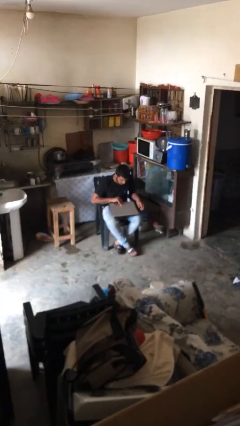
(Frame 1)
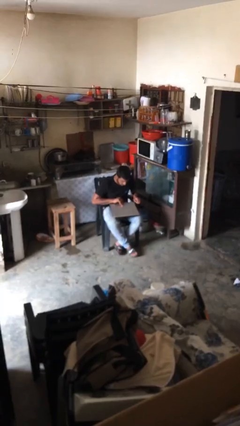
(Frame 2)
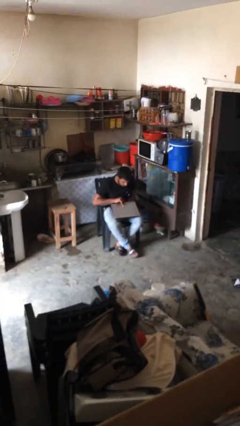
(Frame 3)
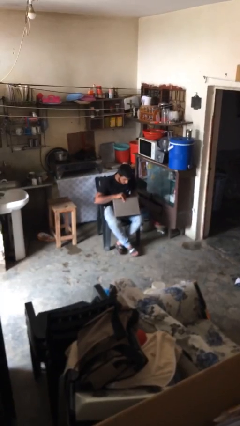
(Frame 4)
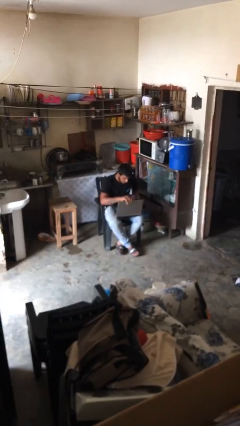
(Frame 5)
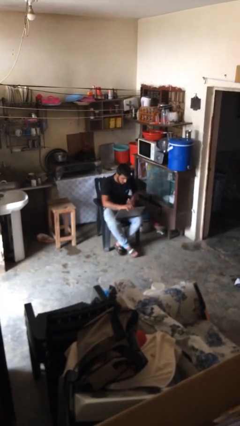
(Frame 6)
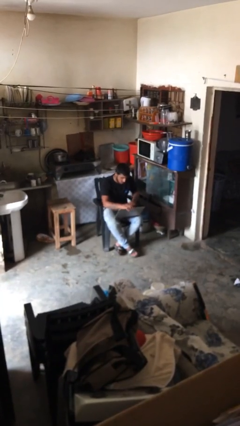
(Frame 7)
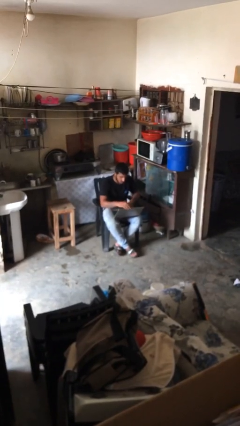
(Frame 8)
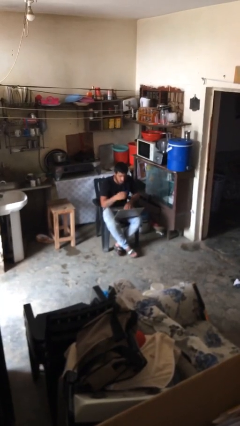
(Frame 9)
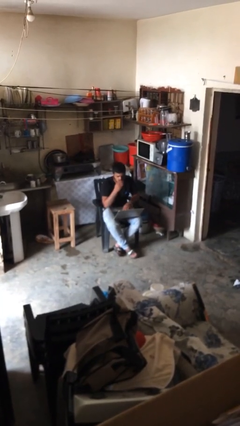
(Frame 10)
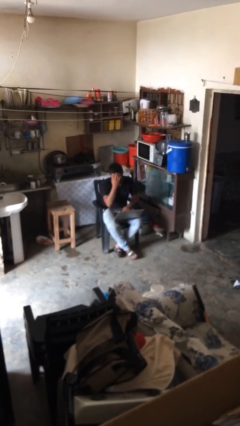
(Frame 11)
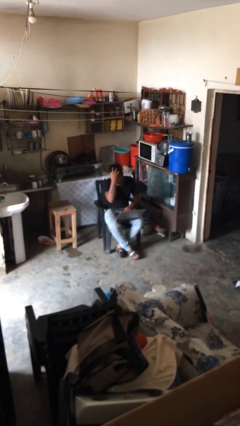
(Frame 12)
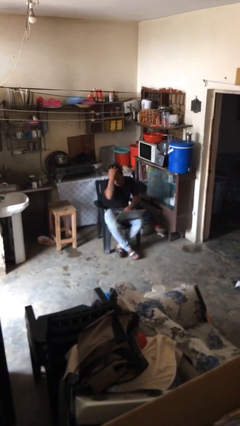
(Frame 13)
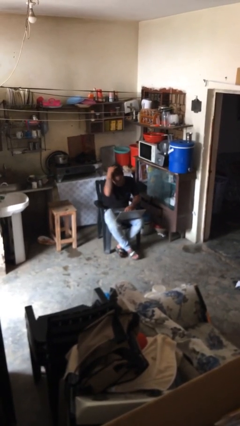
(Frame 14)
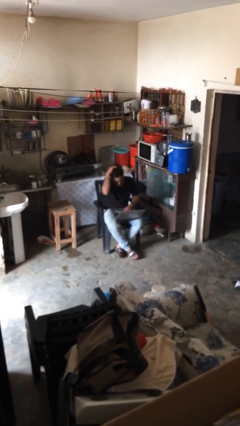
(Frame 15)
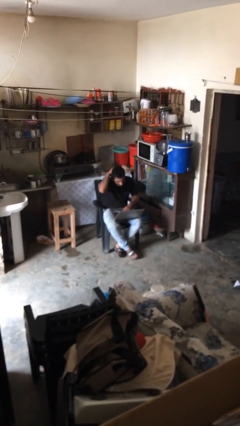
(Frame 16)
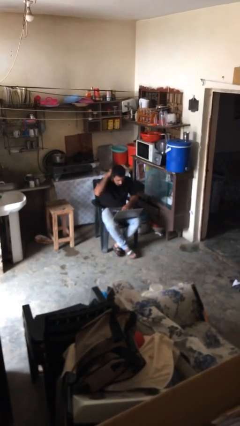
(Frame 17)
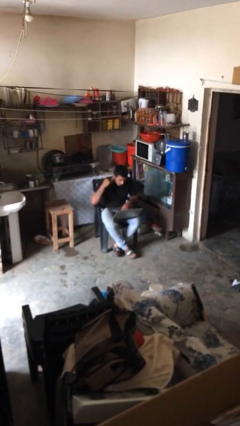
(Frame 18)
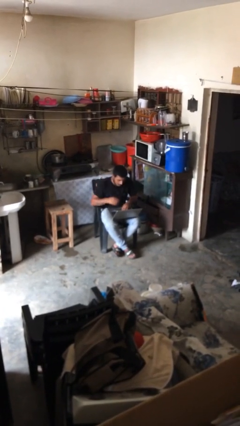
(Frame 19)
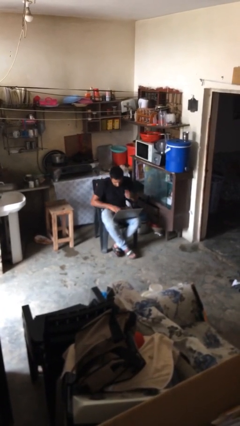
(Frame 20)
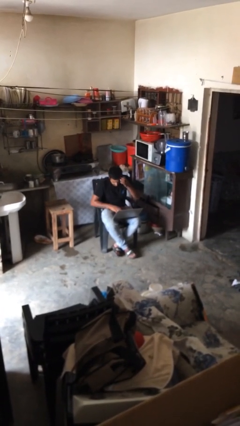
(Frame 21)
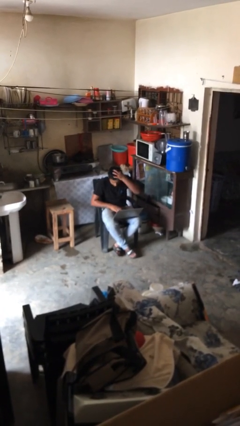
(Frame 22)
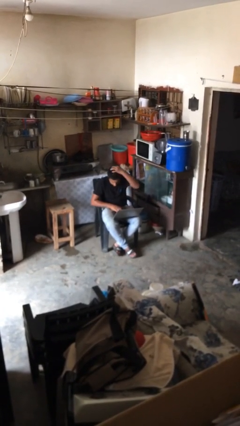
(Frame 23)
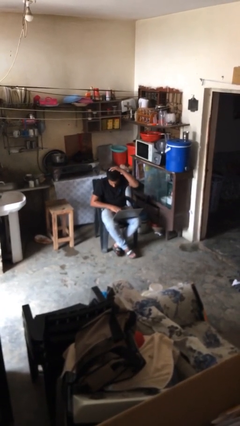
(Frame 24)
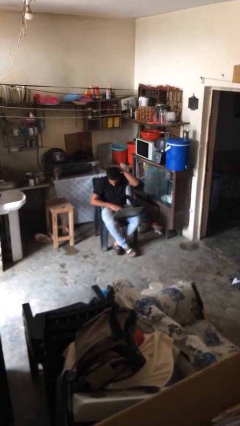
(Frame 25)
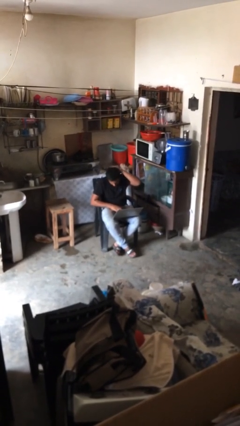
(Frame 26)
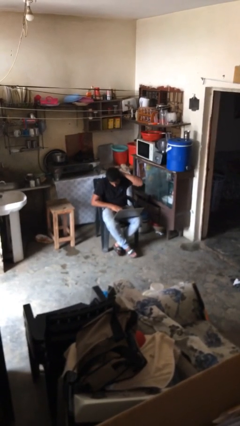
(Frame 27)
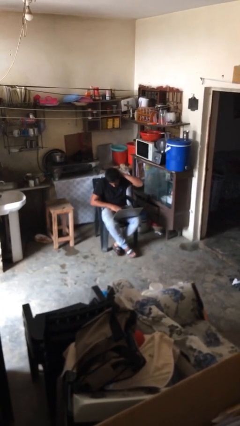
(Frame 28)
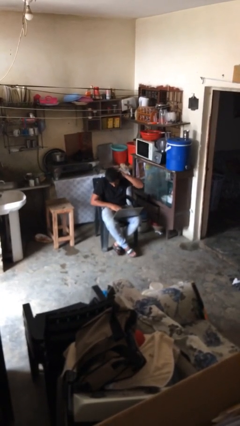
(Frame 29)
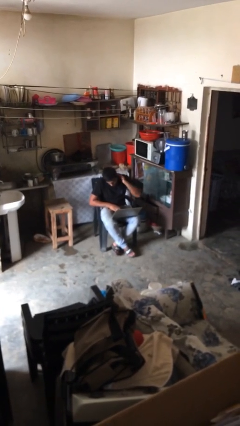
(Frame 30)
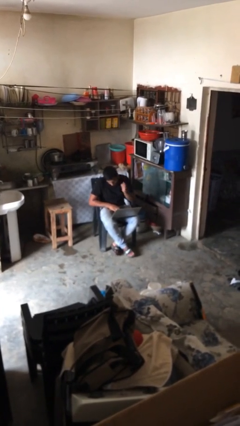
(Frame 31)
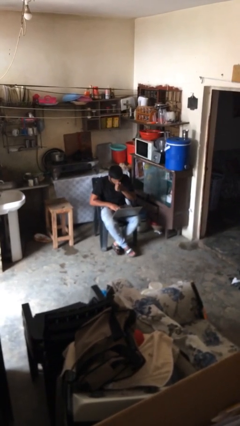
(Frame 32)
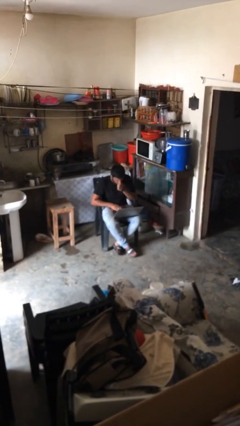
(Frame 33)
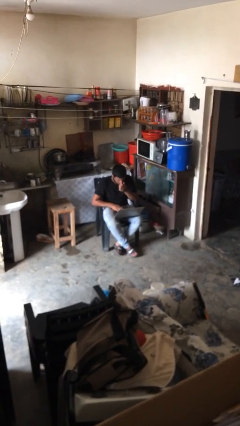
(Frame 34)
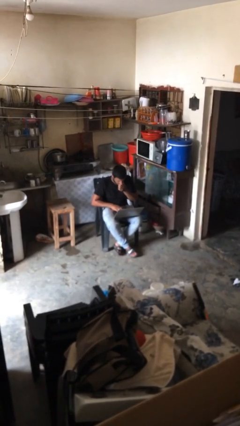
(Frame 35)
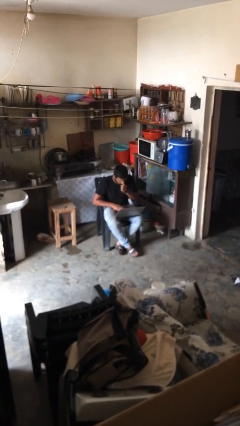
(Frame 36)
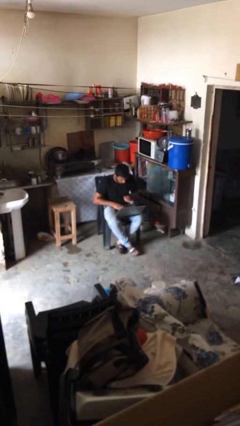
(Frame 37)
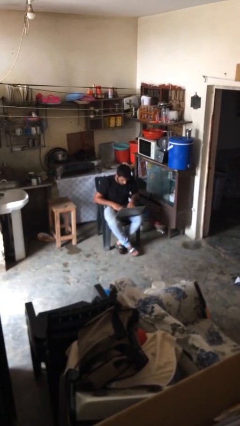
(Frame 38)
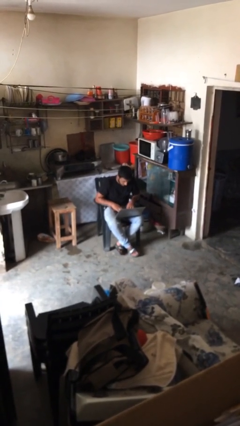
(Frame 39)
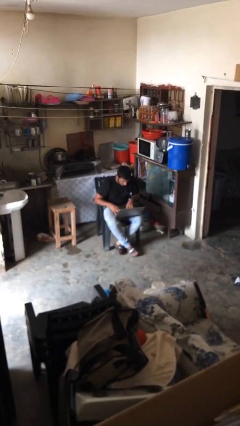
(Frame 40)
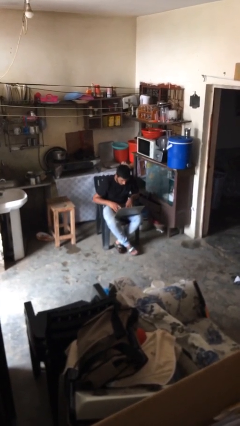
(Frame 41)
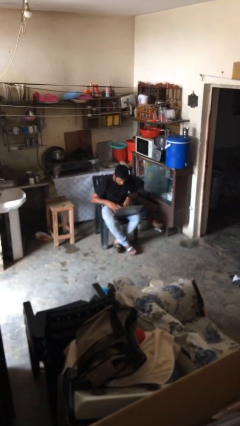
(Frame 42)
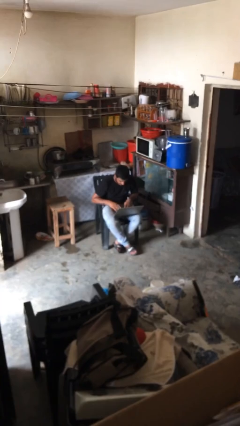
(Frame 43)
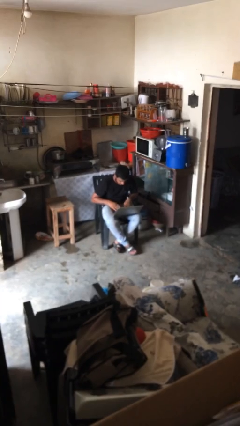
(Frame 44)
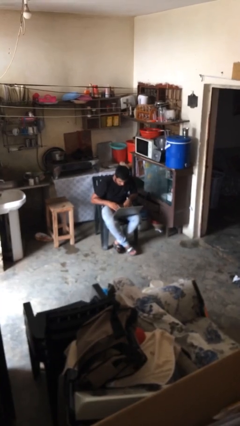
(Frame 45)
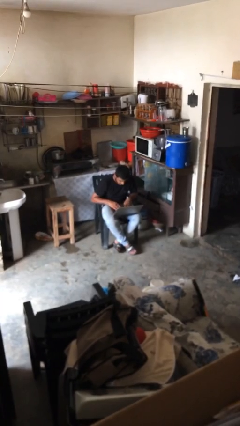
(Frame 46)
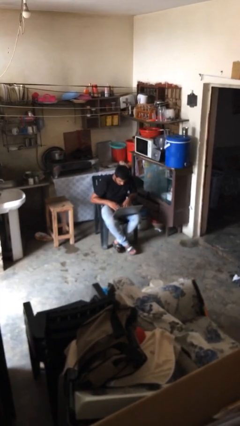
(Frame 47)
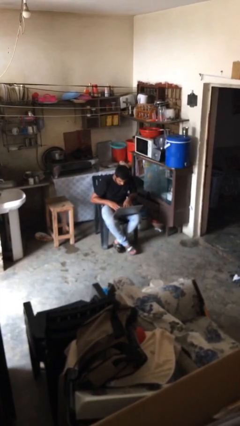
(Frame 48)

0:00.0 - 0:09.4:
person interacts with laptop

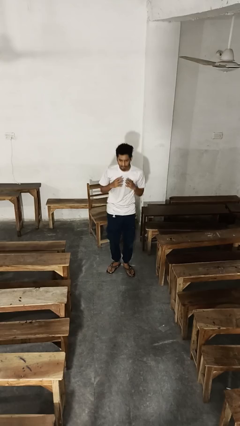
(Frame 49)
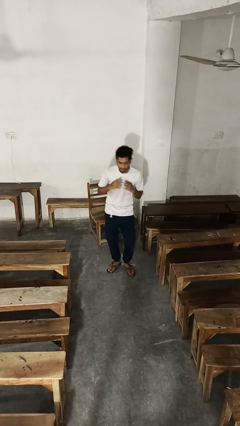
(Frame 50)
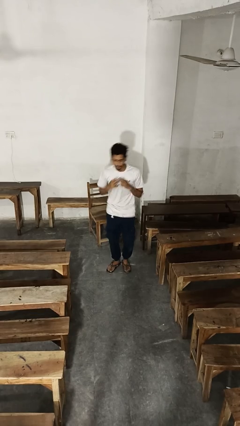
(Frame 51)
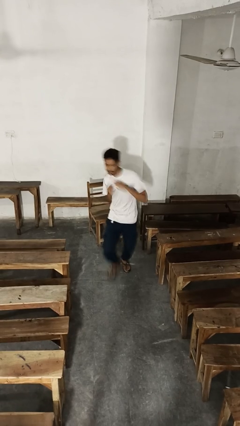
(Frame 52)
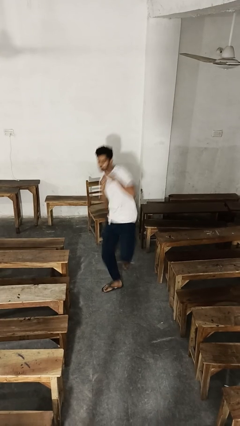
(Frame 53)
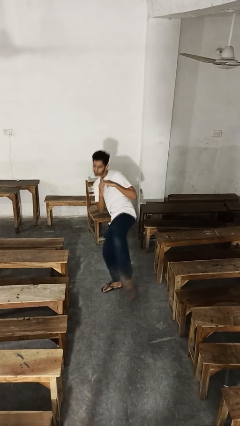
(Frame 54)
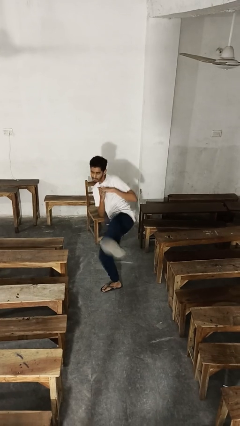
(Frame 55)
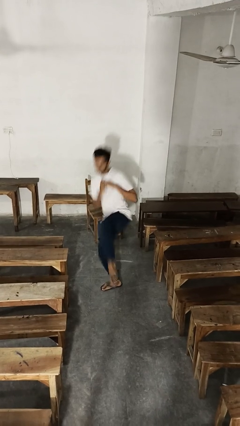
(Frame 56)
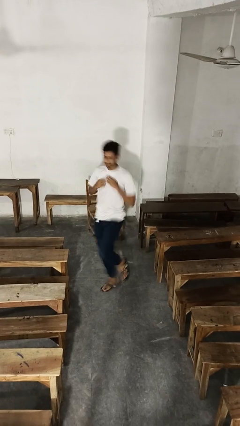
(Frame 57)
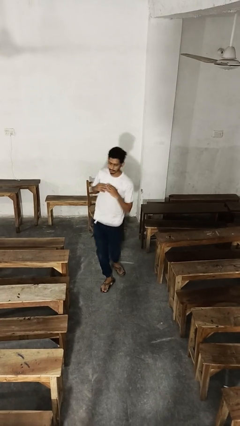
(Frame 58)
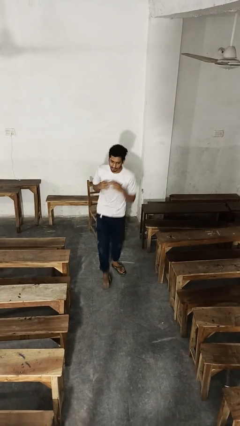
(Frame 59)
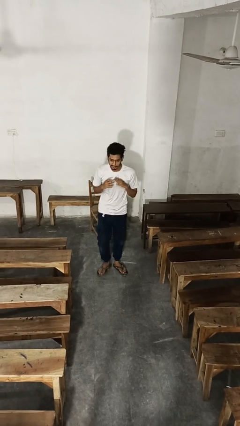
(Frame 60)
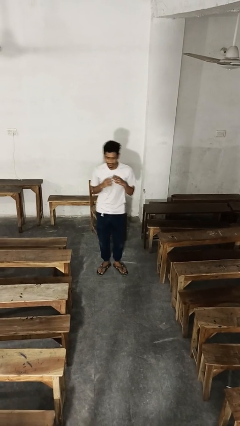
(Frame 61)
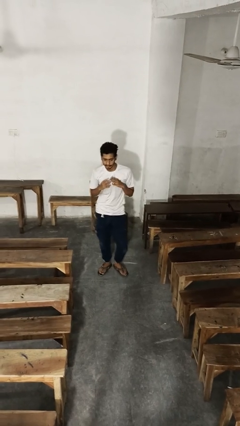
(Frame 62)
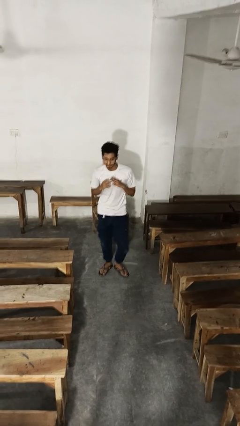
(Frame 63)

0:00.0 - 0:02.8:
person karate kicks

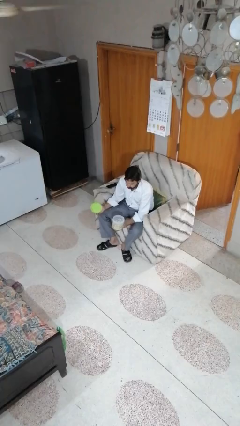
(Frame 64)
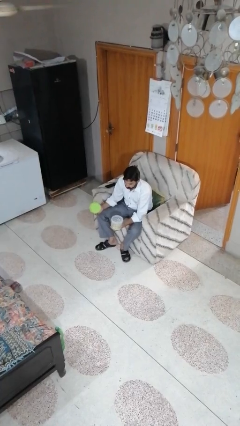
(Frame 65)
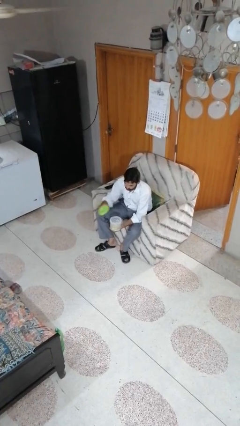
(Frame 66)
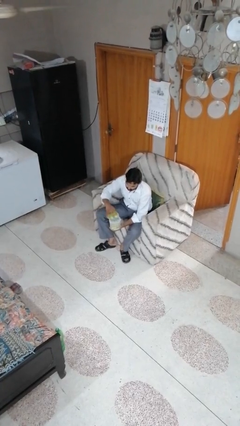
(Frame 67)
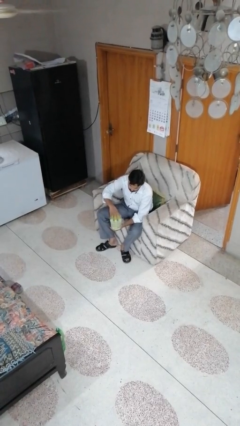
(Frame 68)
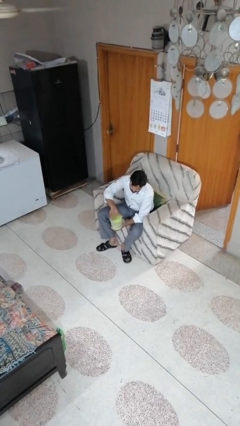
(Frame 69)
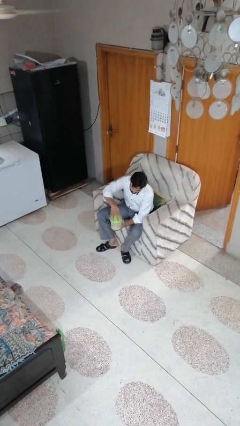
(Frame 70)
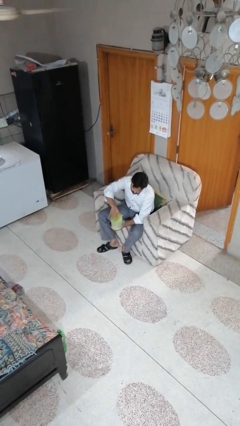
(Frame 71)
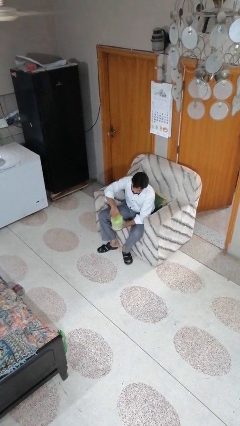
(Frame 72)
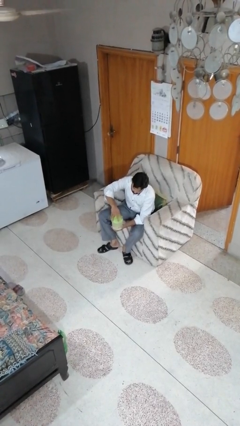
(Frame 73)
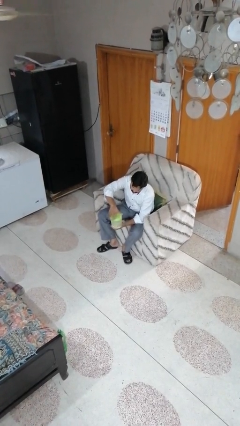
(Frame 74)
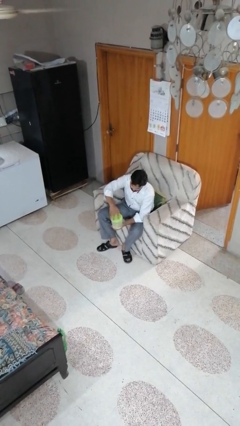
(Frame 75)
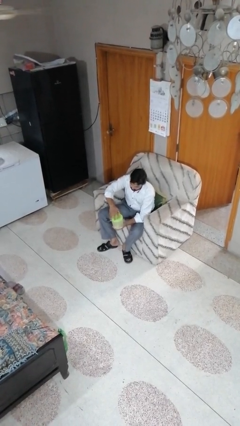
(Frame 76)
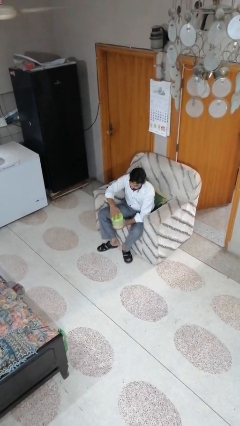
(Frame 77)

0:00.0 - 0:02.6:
person closes jar

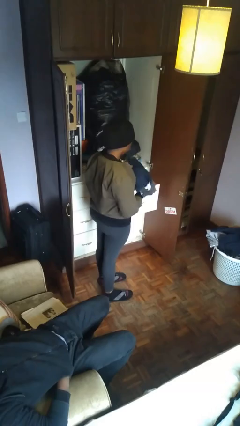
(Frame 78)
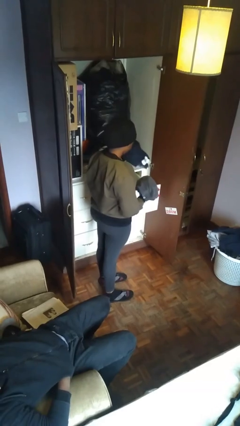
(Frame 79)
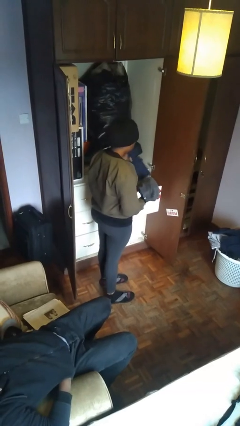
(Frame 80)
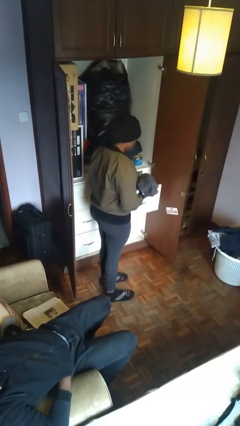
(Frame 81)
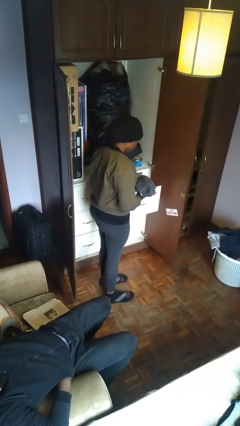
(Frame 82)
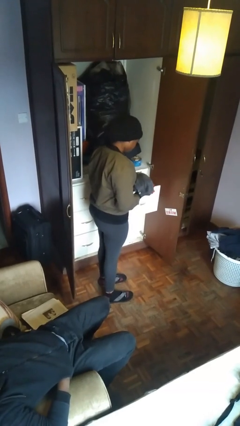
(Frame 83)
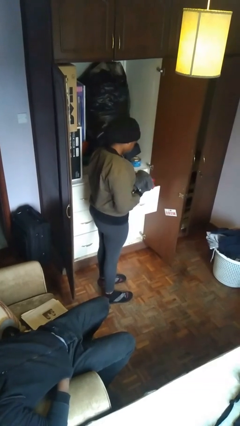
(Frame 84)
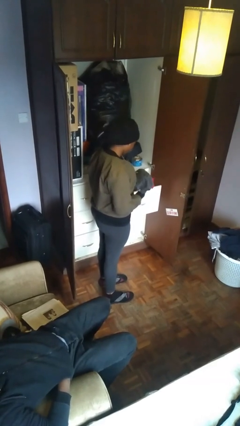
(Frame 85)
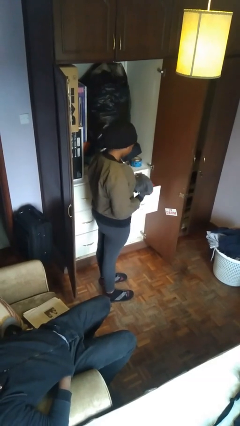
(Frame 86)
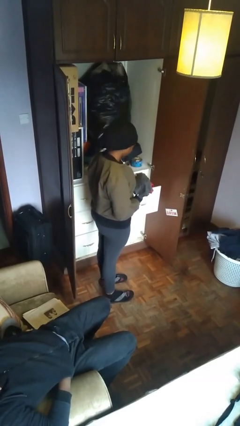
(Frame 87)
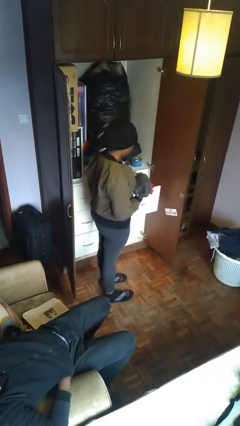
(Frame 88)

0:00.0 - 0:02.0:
person puts clothes into dresser

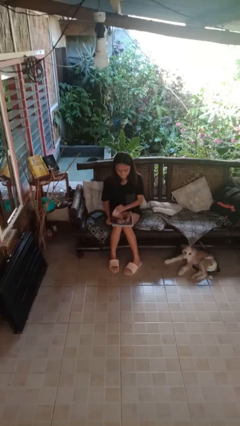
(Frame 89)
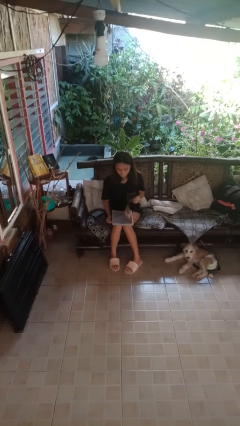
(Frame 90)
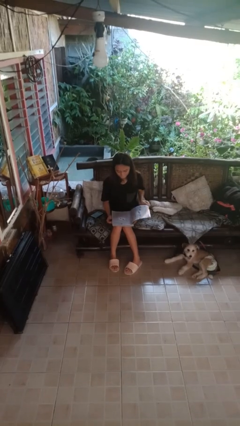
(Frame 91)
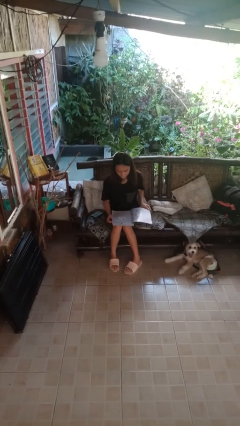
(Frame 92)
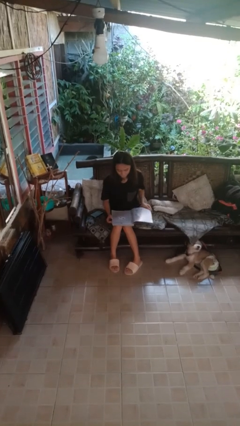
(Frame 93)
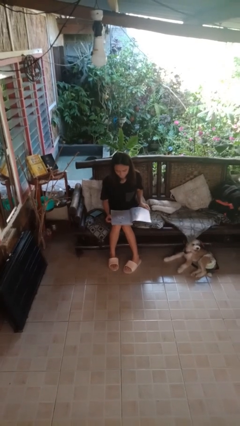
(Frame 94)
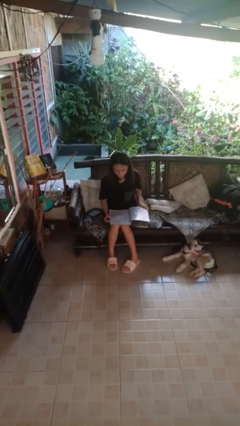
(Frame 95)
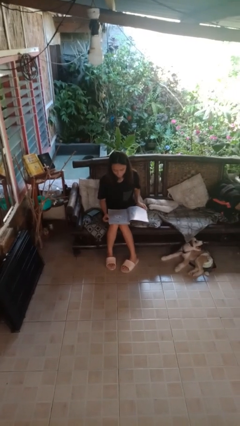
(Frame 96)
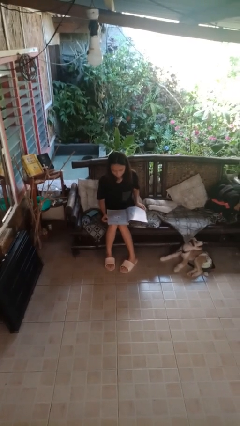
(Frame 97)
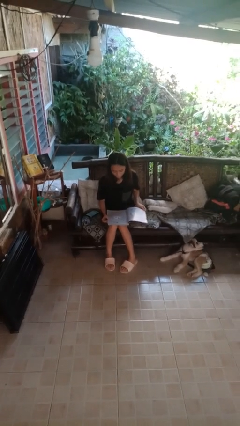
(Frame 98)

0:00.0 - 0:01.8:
person reads magazine
